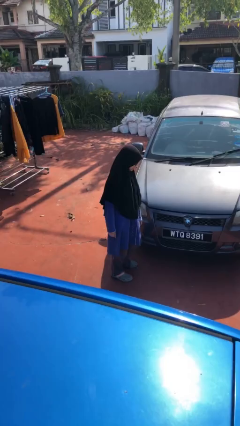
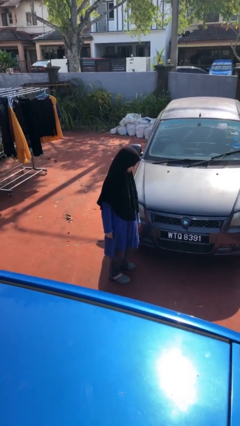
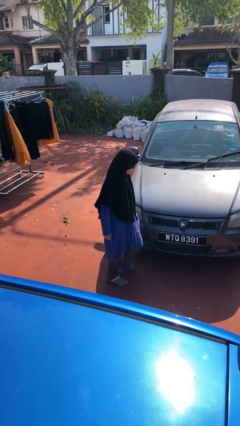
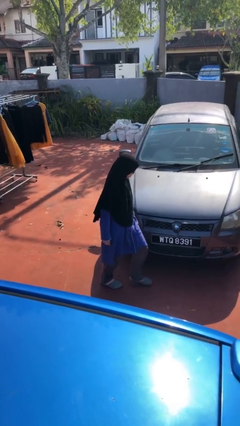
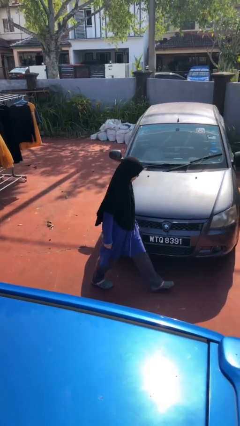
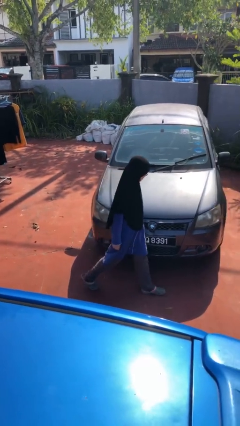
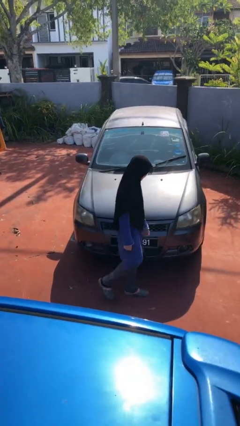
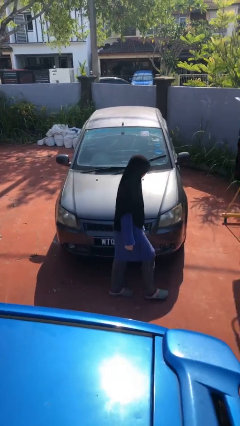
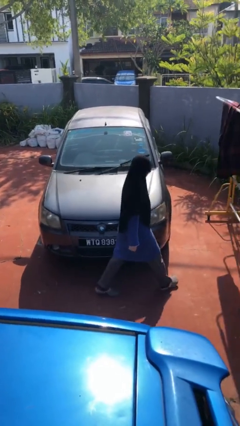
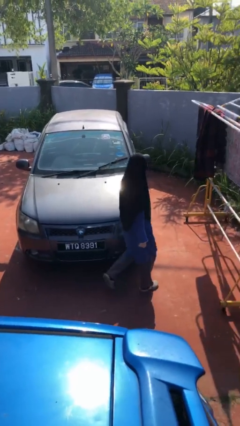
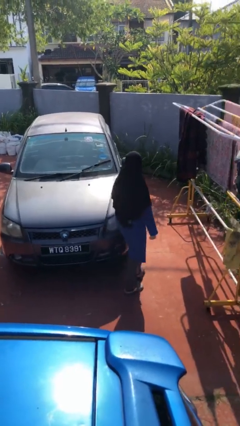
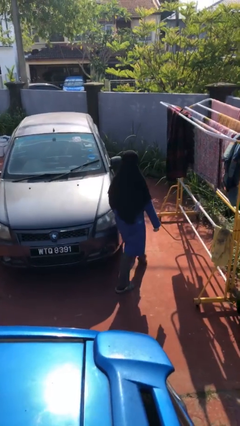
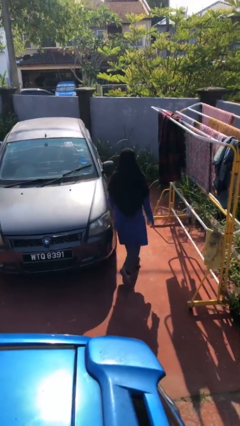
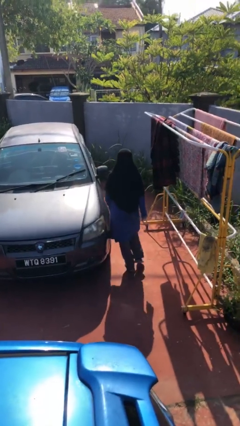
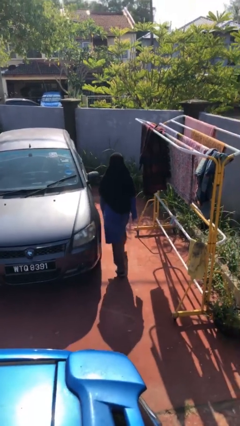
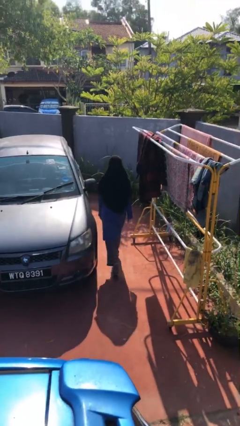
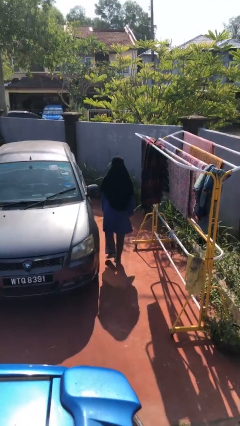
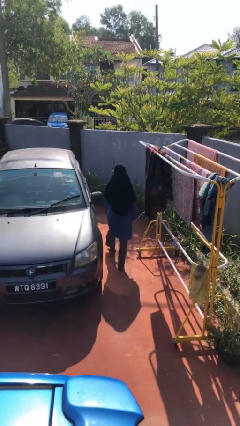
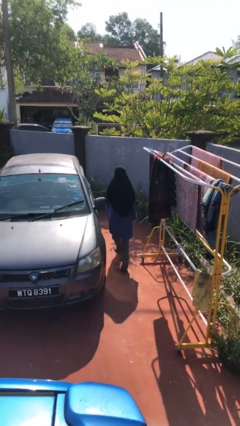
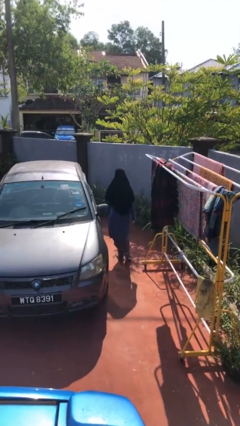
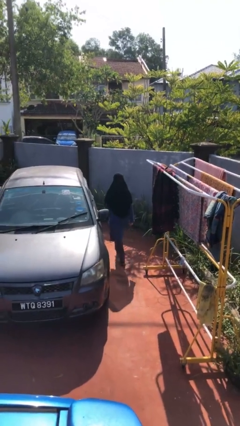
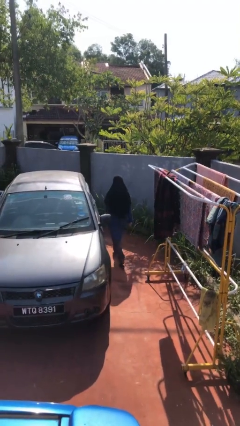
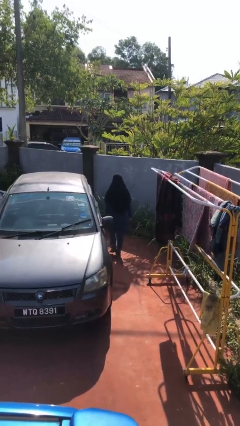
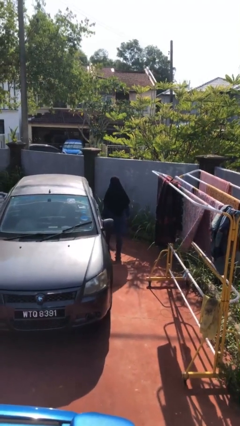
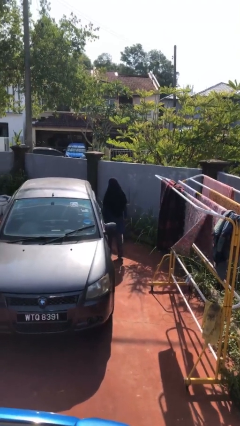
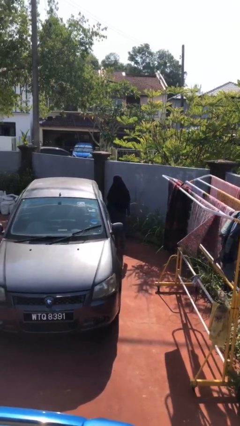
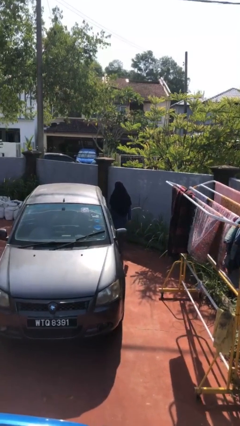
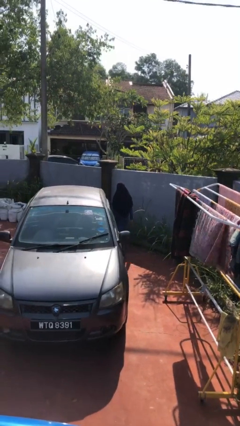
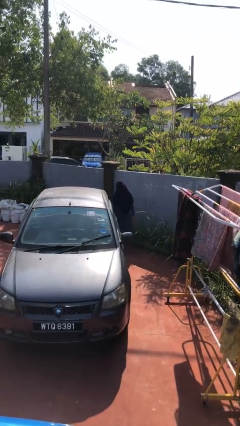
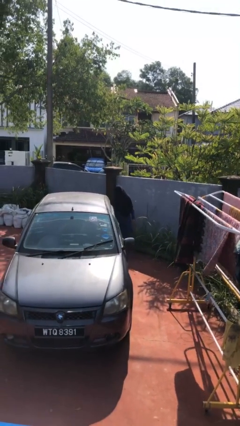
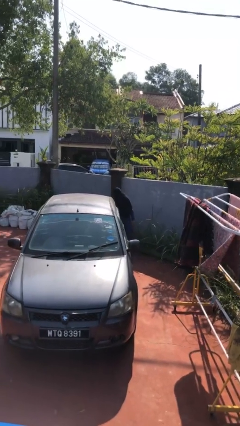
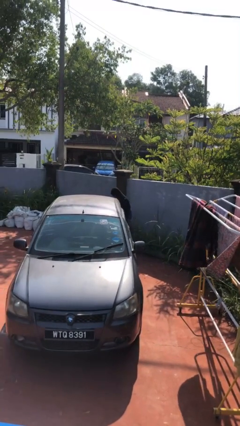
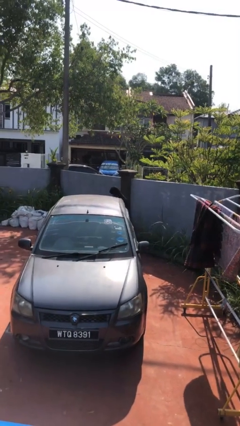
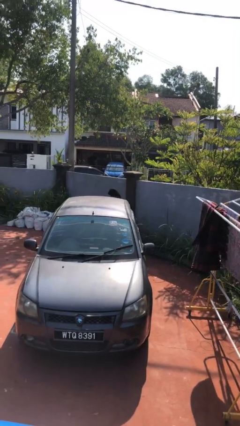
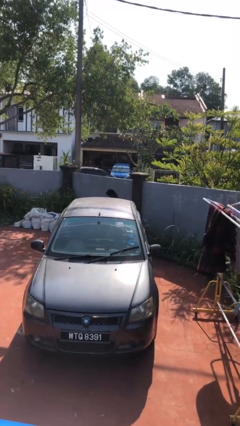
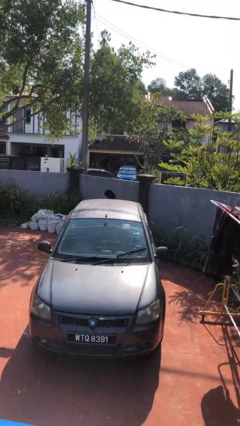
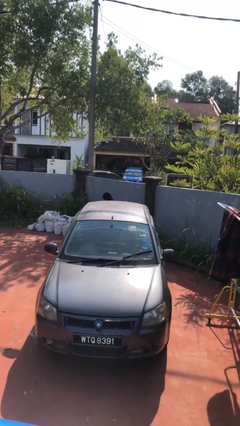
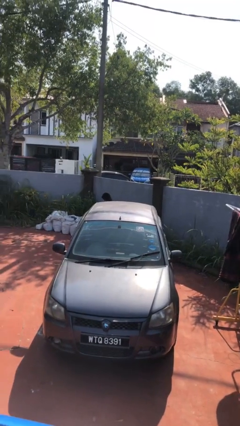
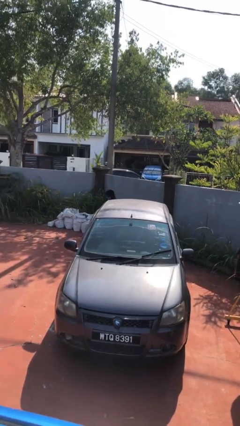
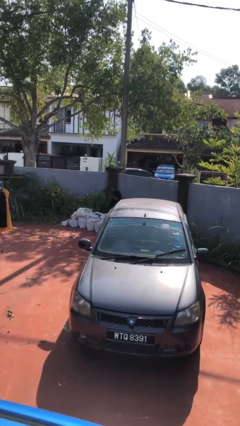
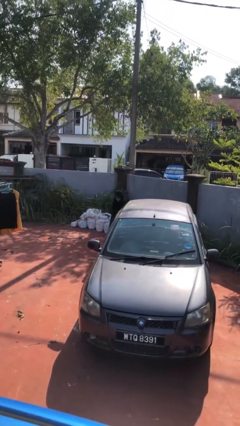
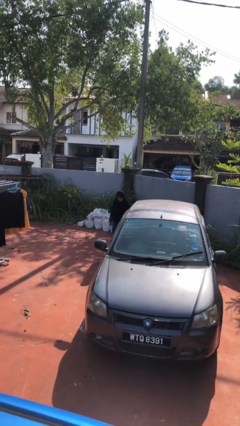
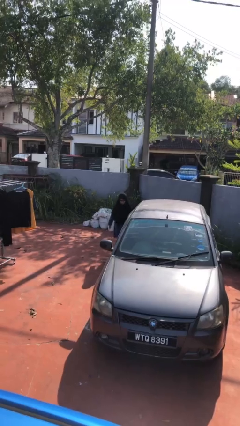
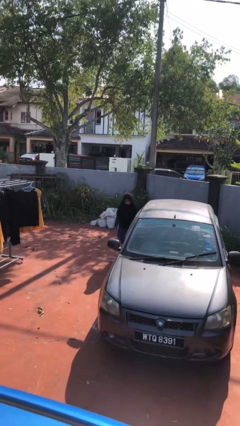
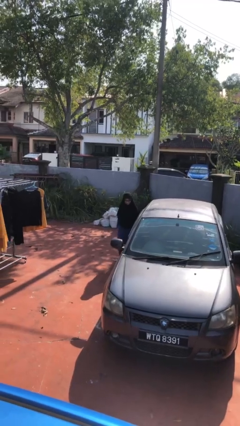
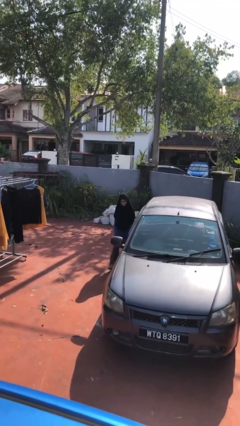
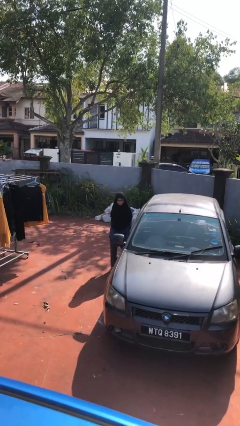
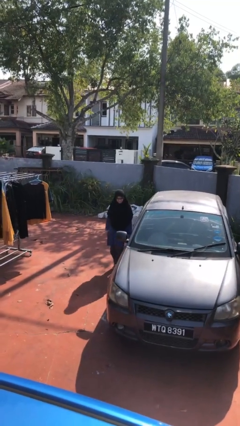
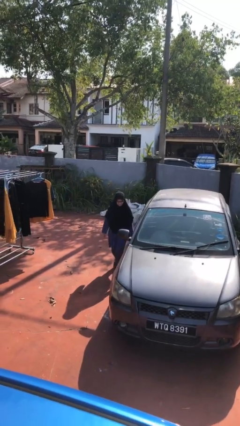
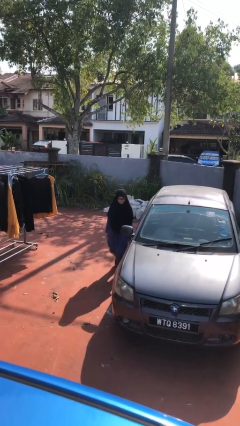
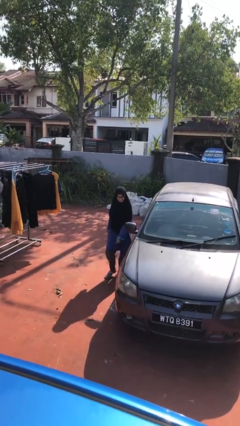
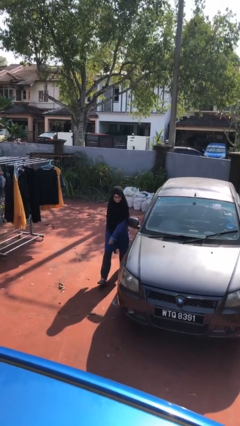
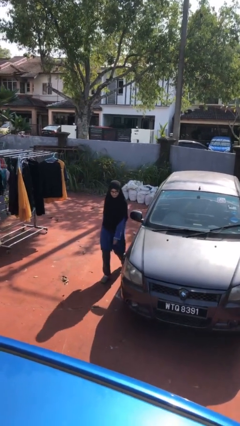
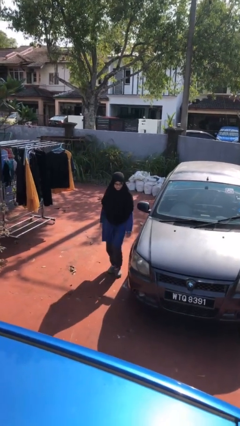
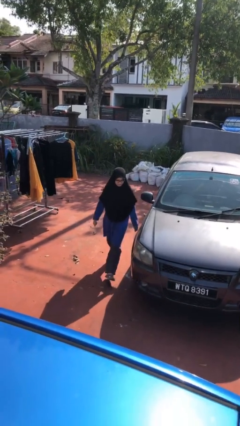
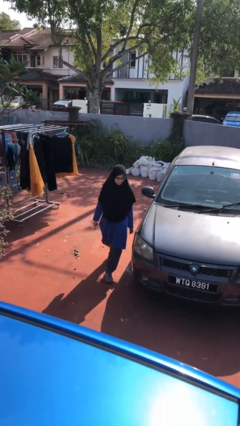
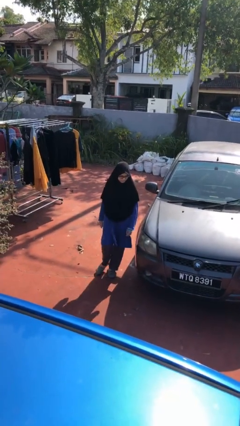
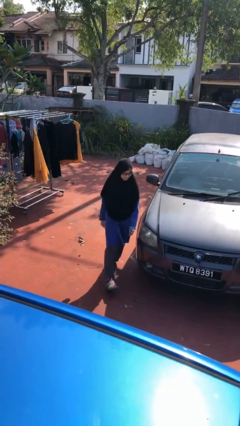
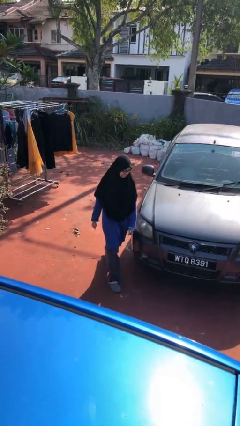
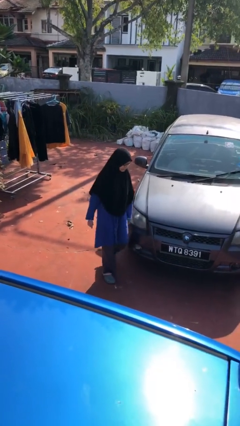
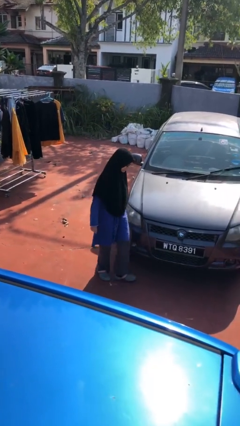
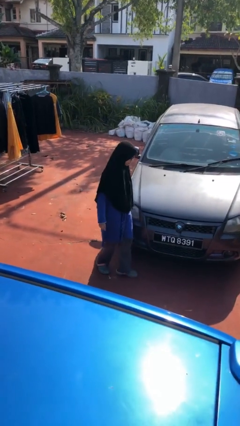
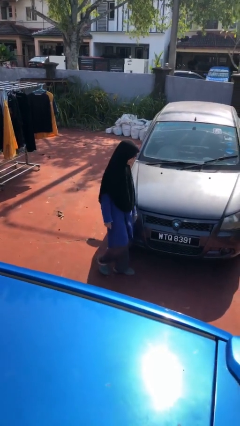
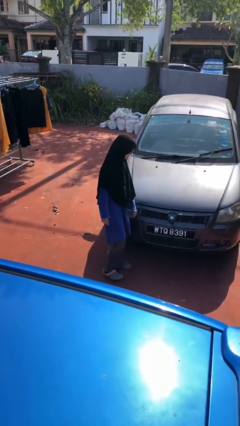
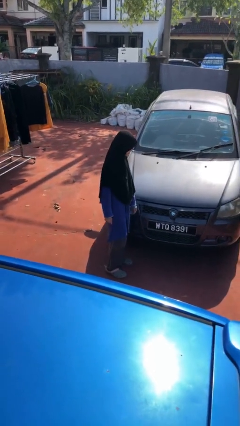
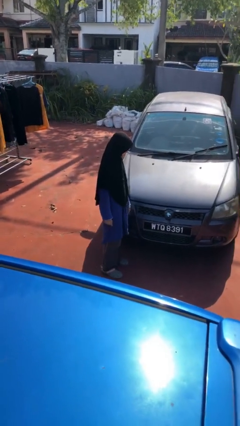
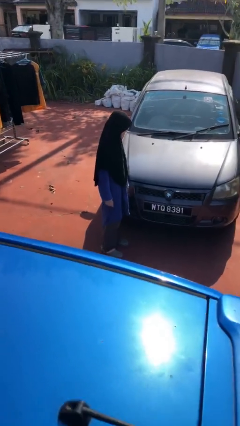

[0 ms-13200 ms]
person walks around car

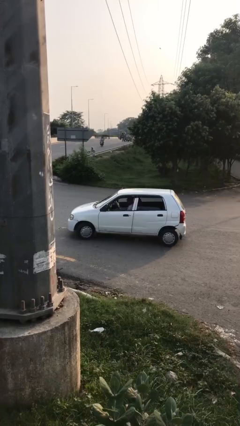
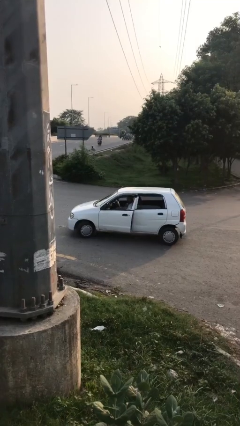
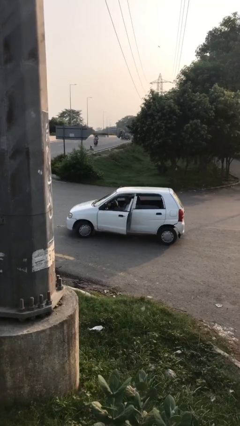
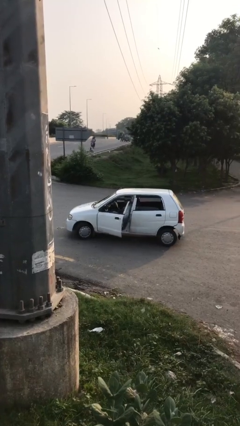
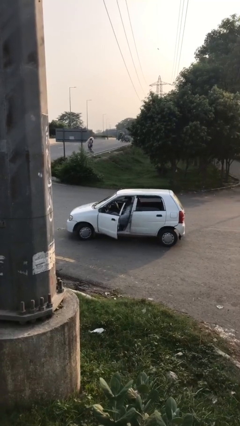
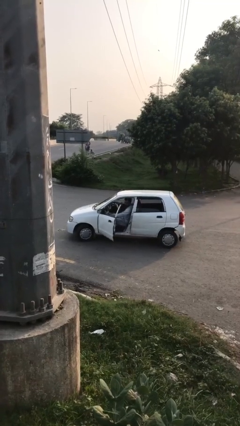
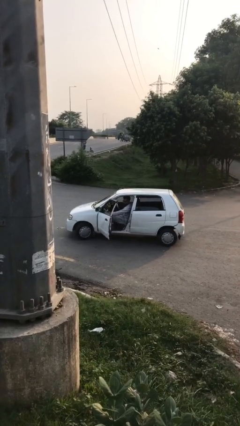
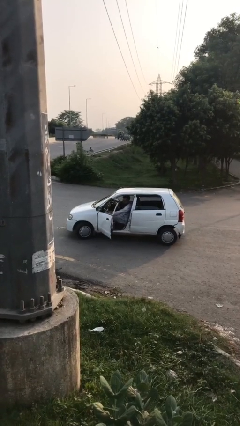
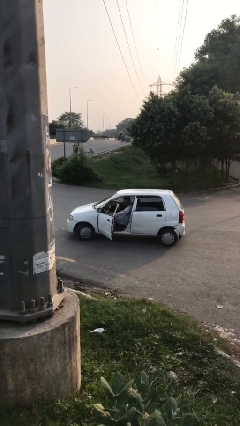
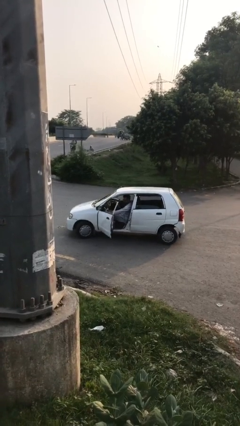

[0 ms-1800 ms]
person opens car door

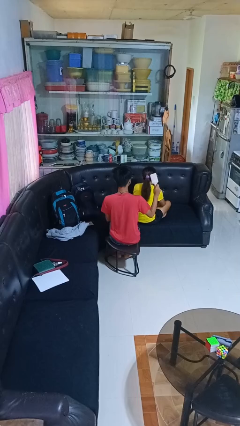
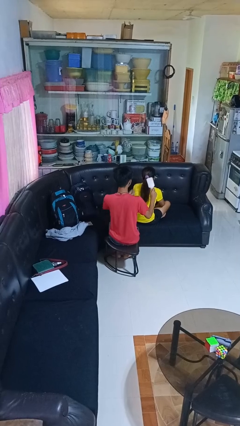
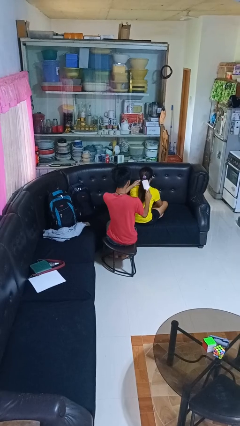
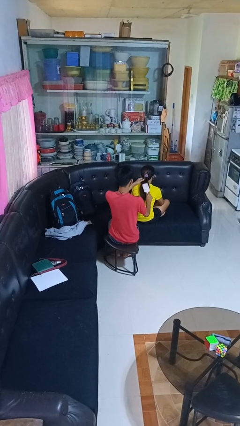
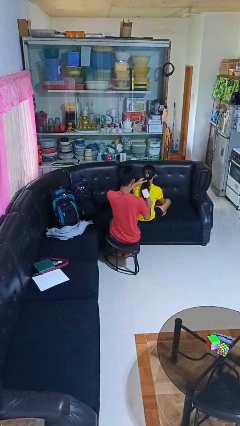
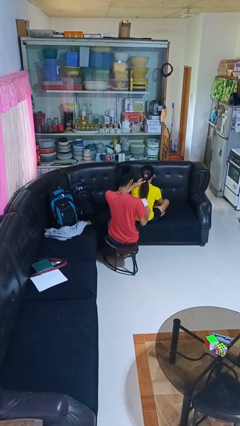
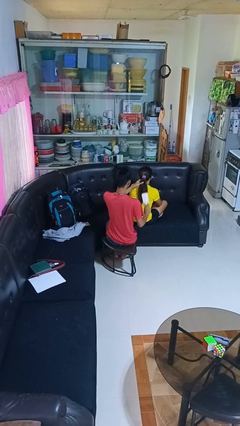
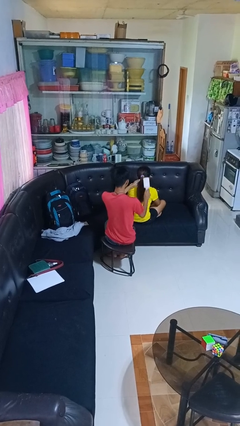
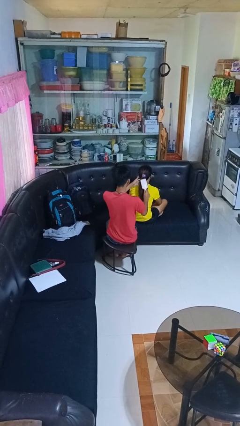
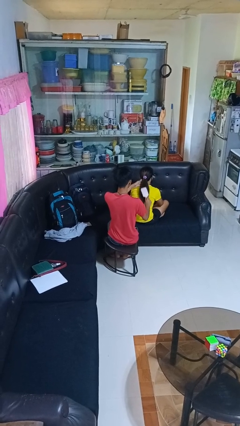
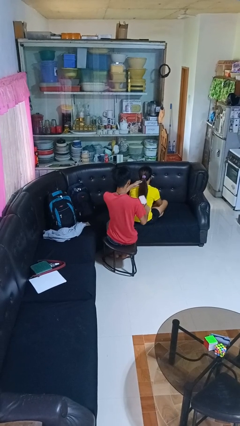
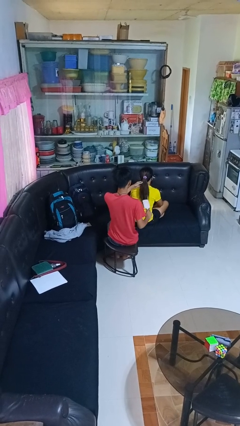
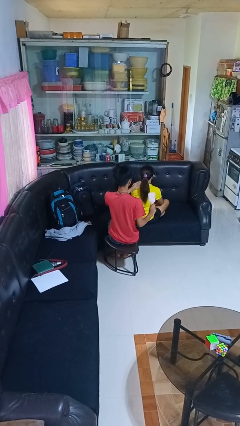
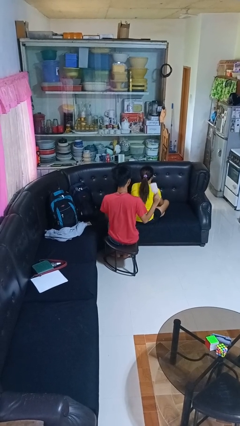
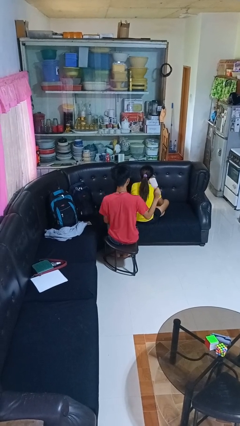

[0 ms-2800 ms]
person brushes hair of person

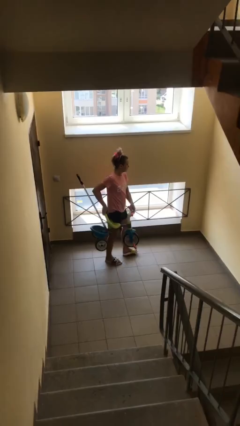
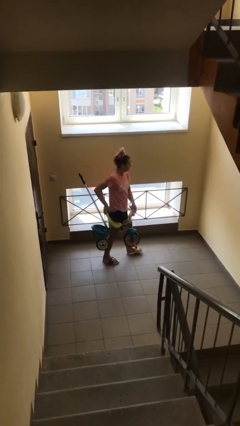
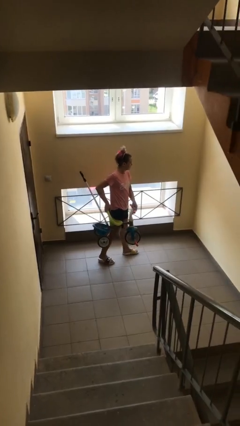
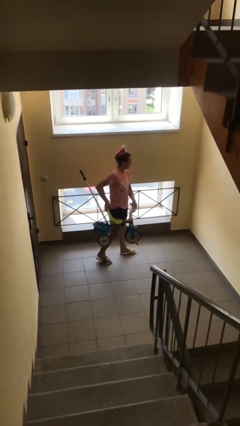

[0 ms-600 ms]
person carries bicycle
